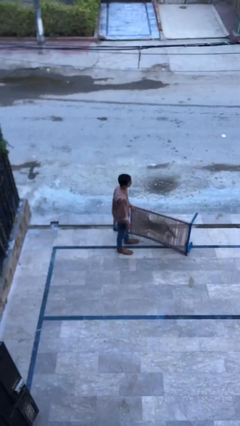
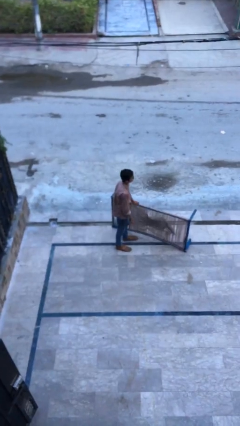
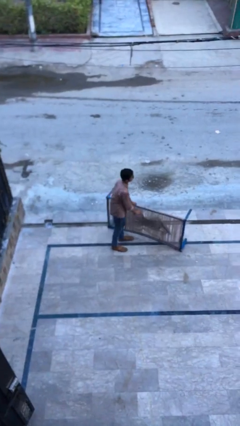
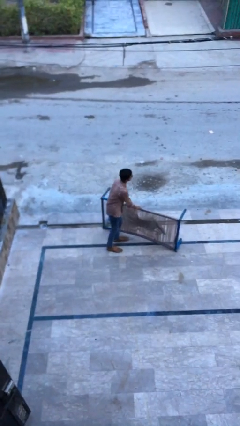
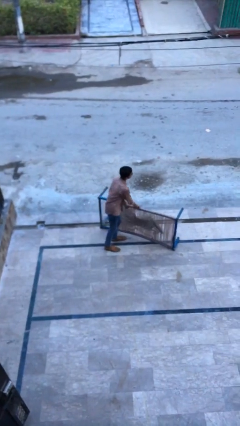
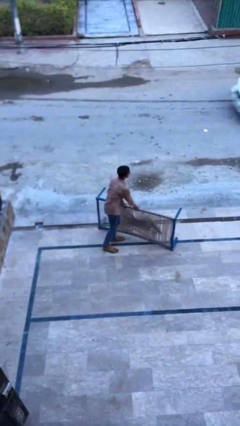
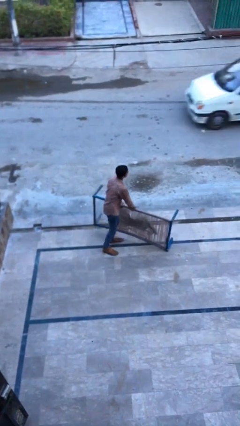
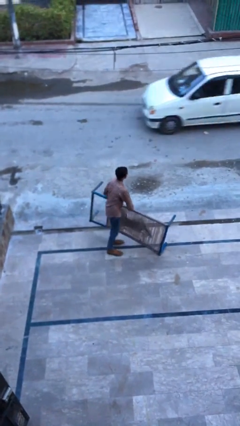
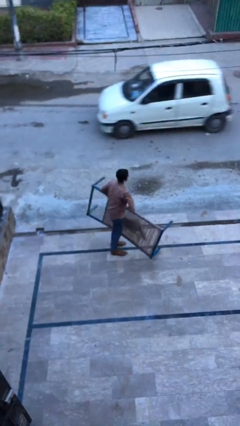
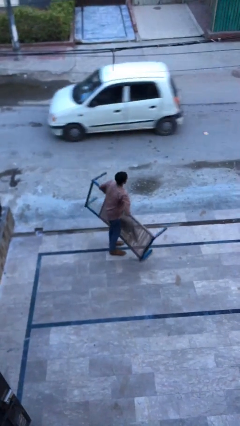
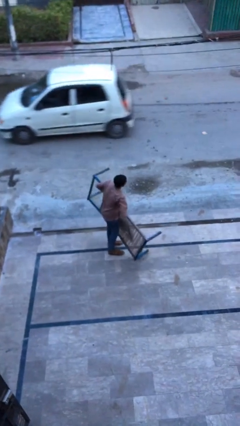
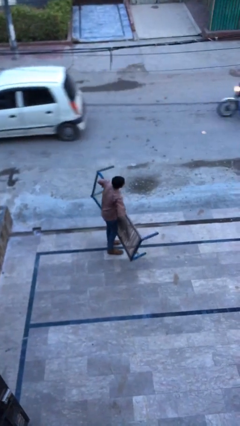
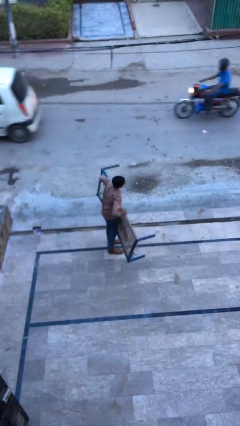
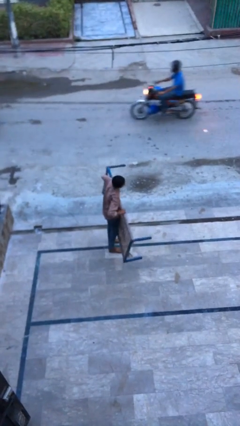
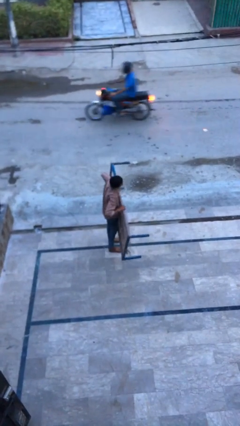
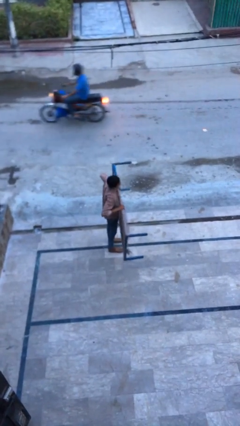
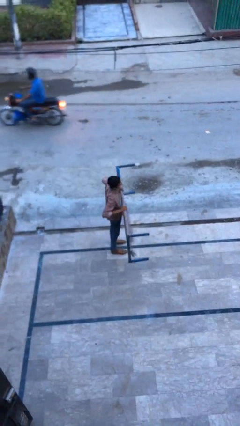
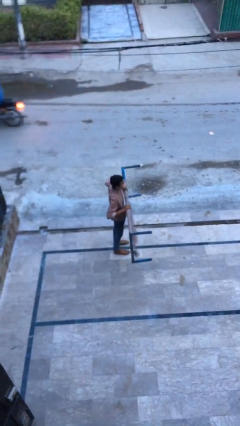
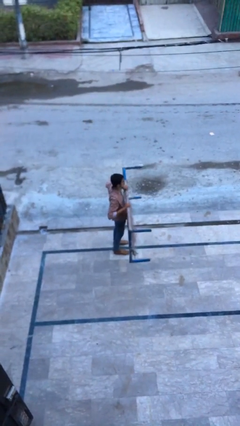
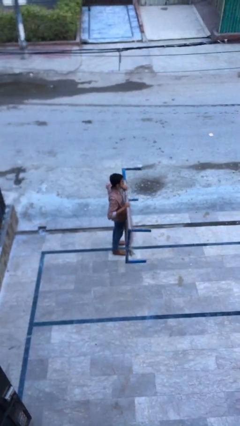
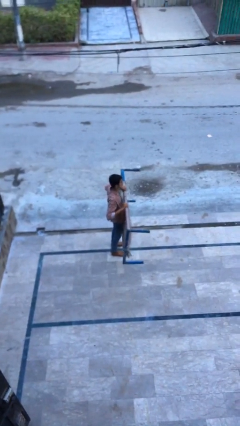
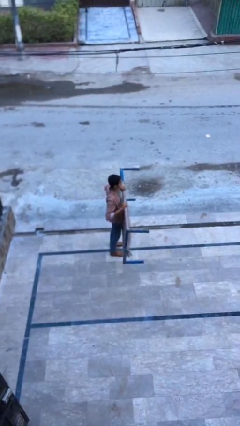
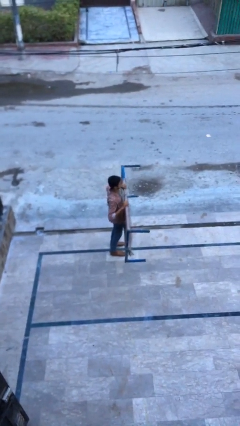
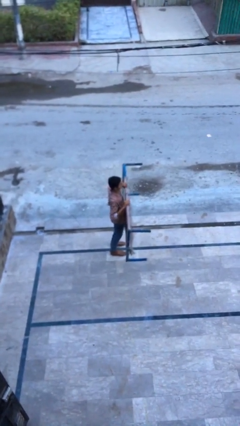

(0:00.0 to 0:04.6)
person picks up object from floor

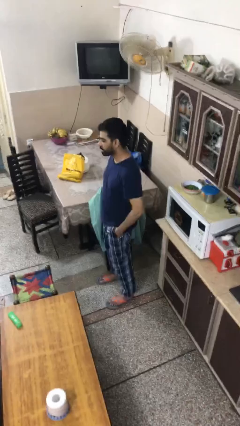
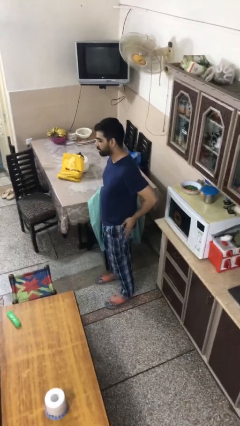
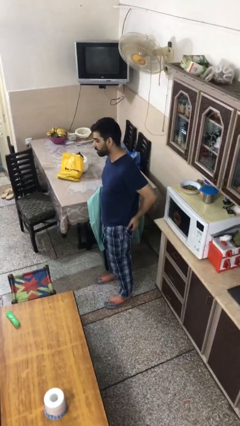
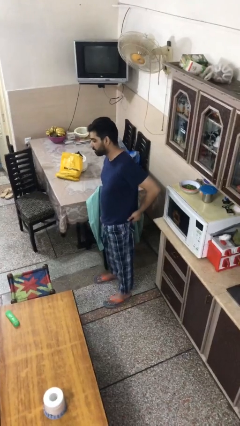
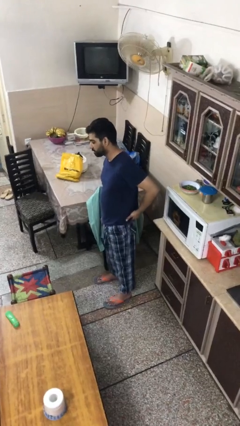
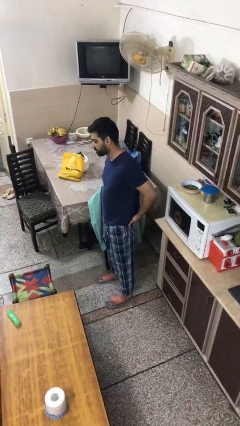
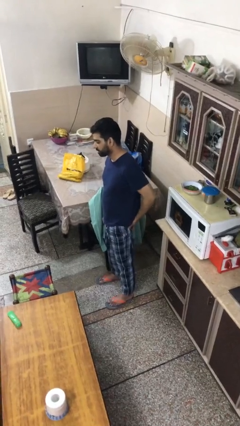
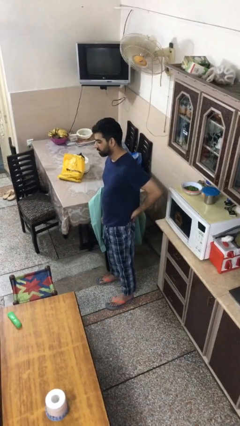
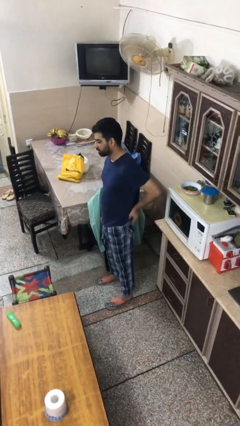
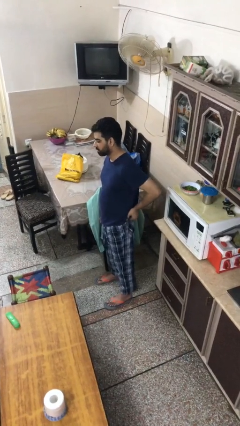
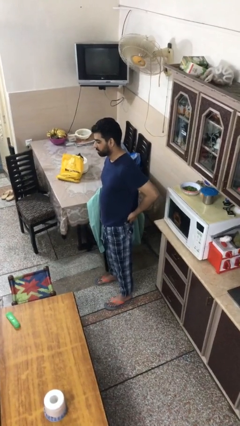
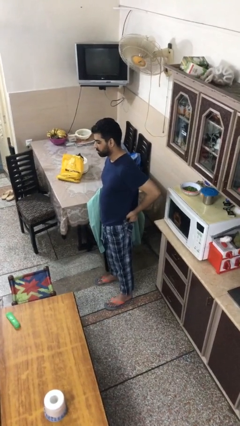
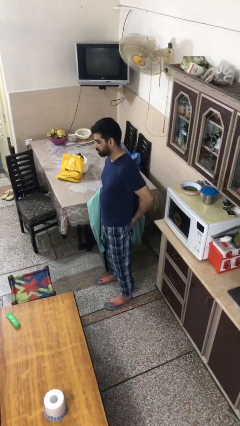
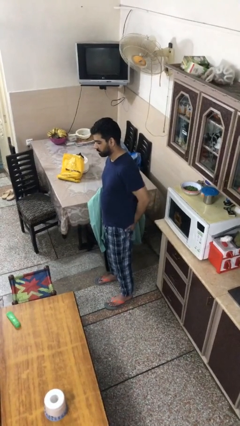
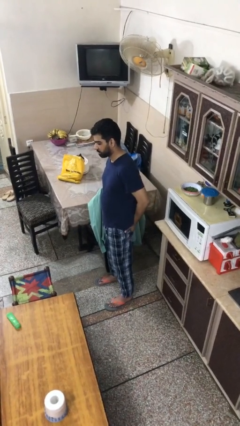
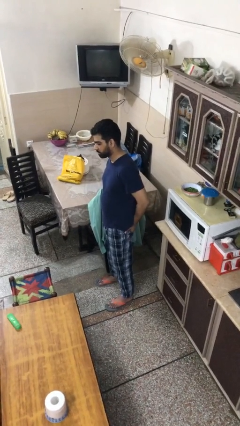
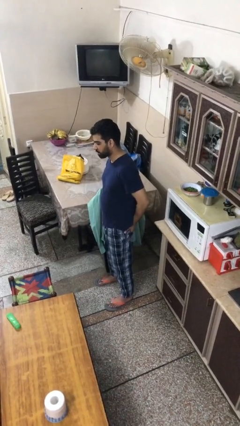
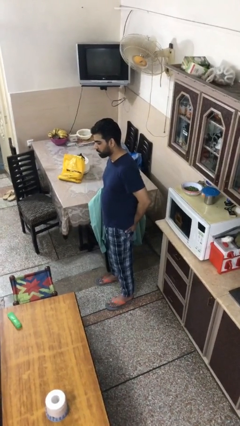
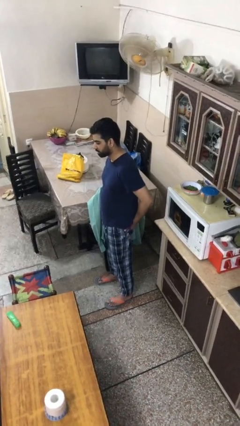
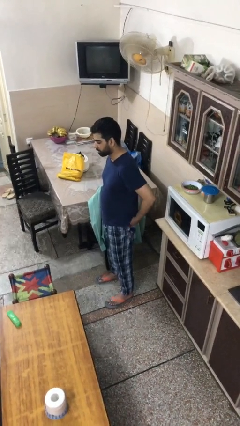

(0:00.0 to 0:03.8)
person puts hands in back pockets

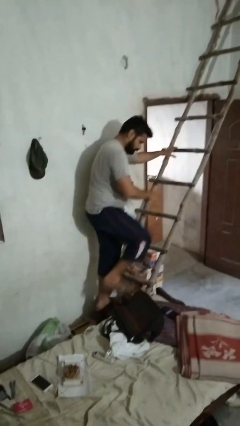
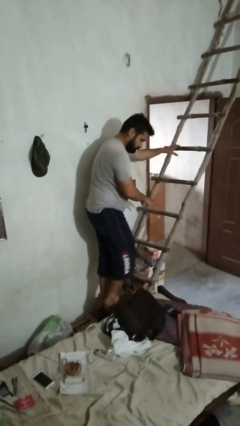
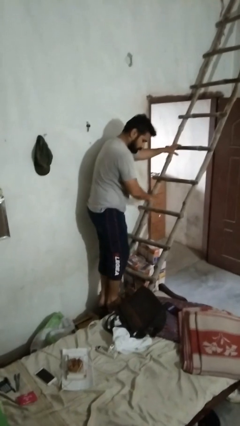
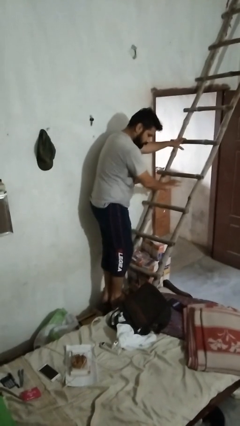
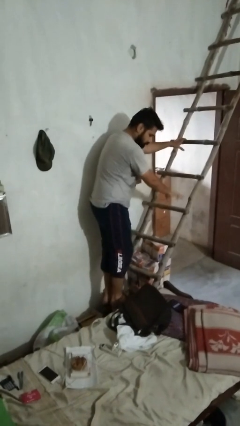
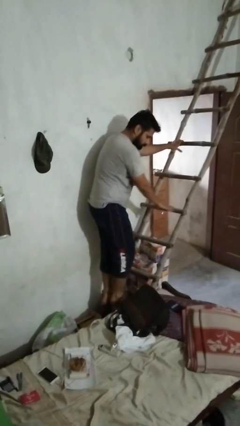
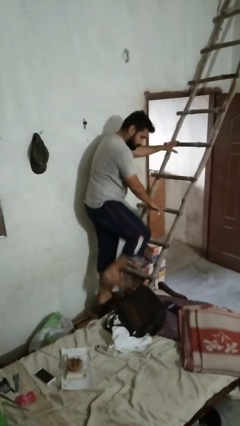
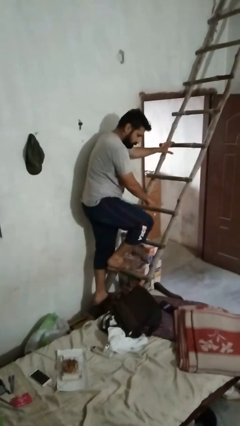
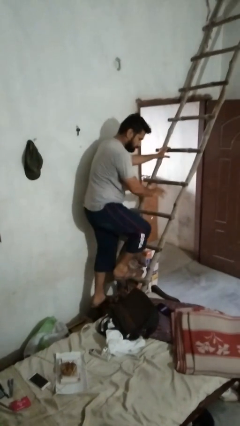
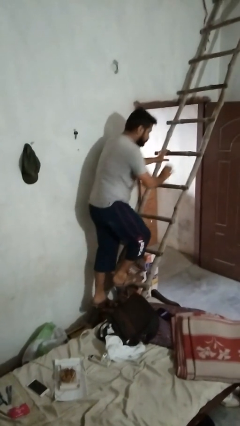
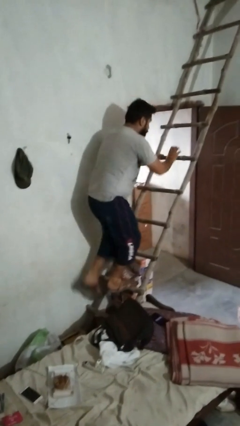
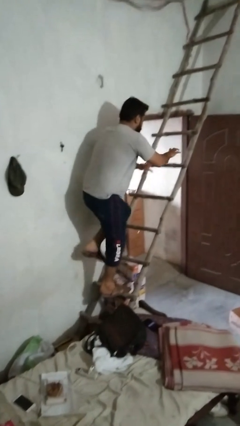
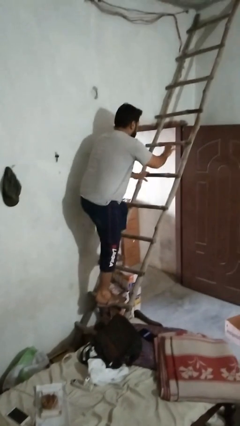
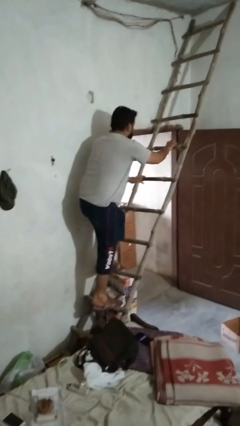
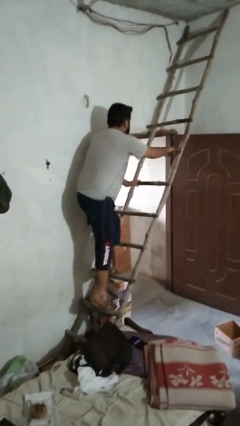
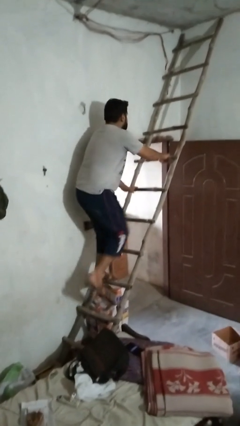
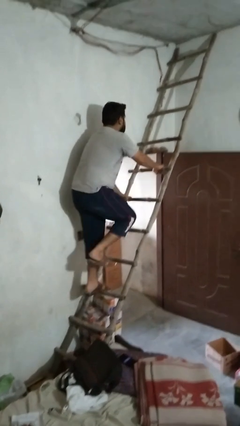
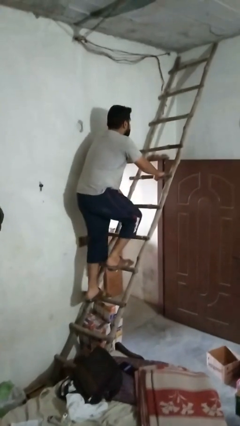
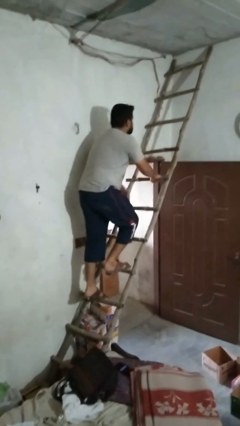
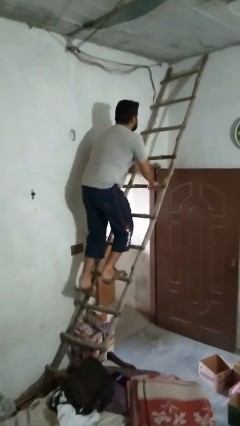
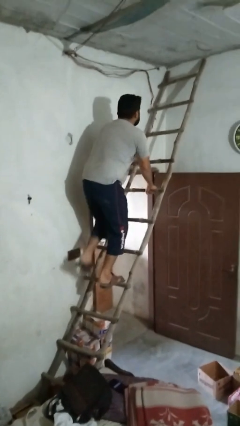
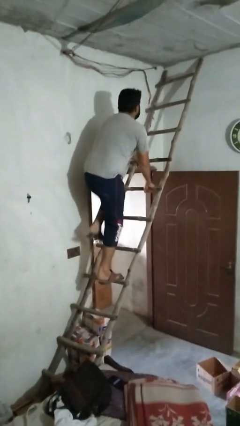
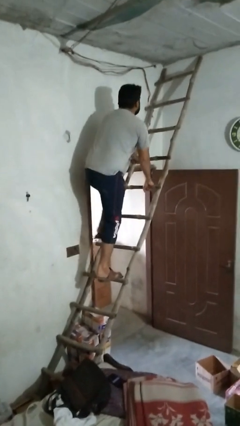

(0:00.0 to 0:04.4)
person climbs up ladder

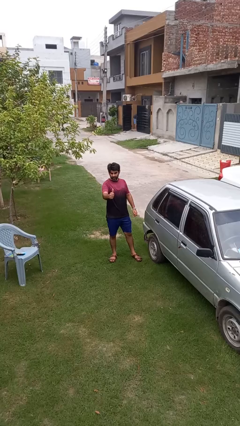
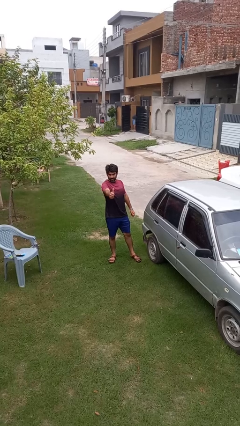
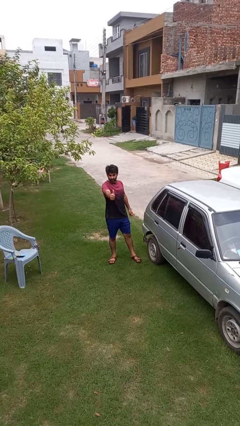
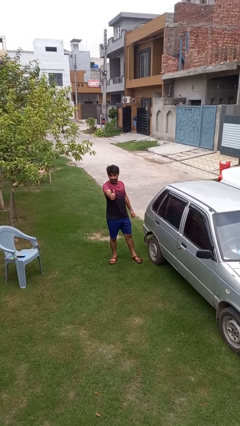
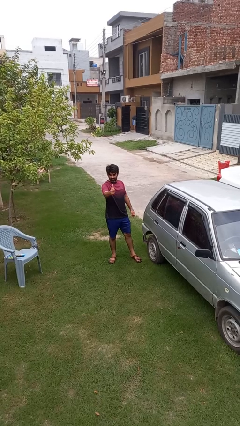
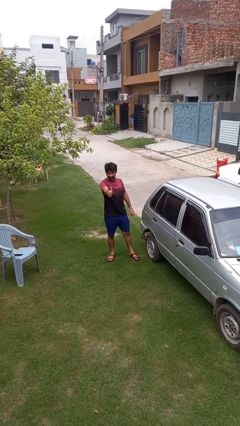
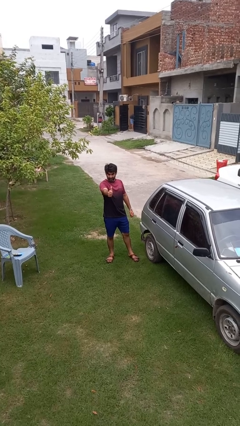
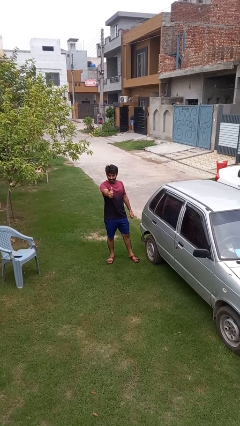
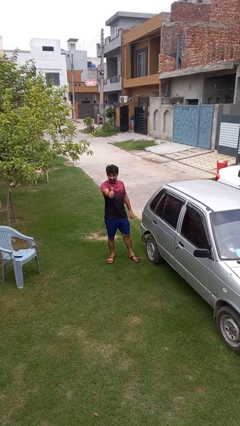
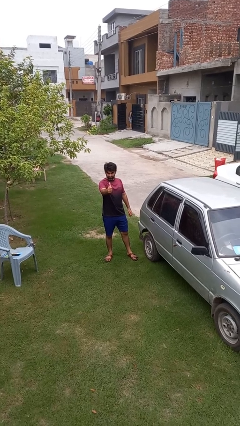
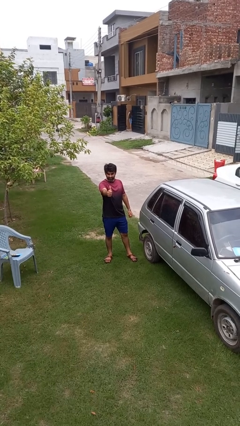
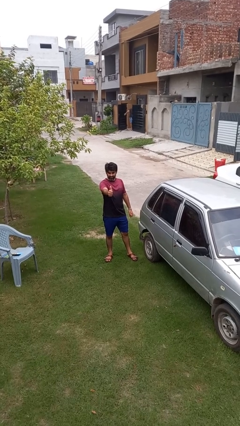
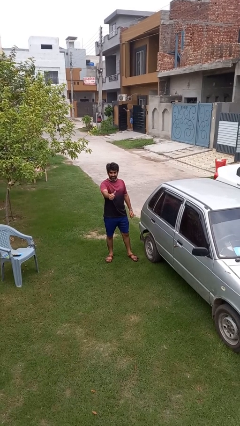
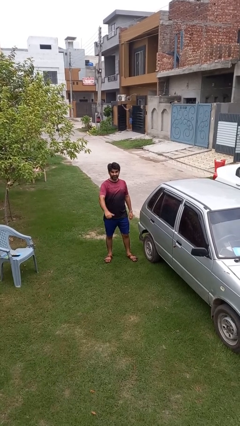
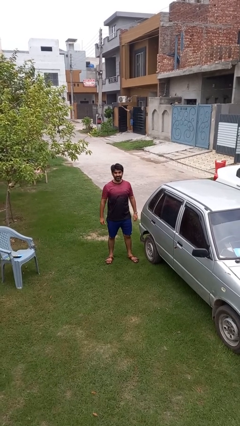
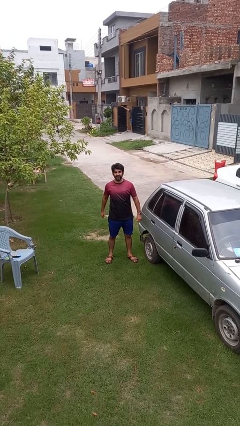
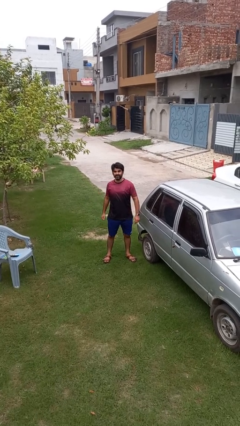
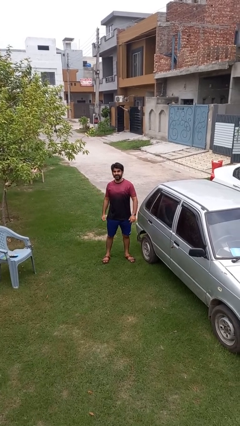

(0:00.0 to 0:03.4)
person gestures thumbs up

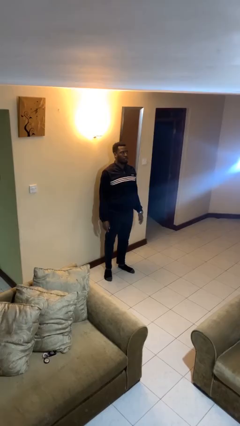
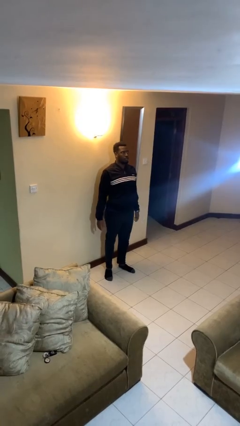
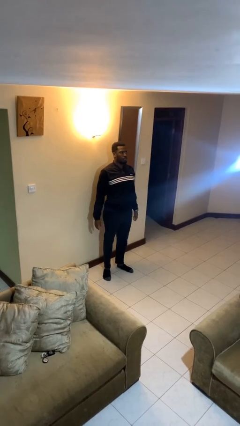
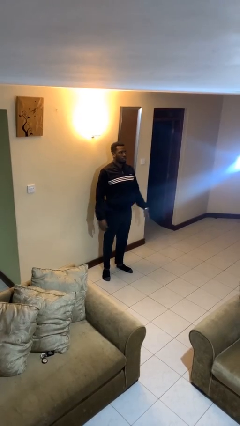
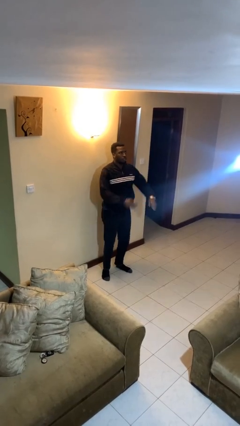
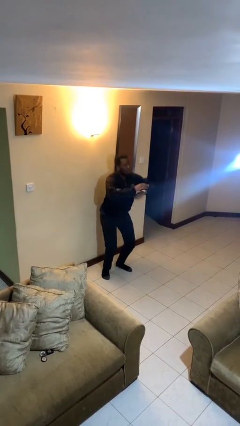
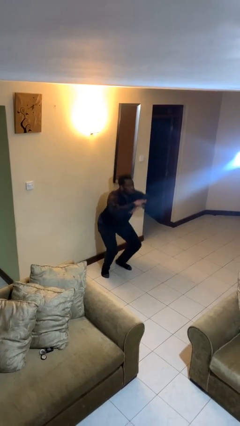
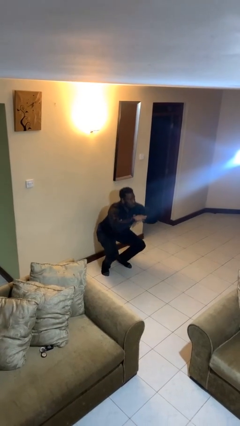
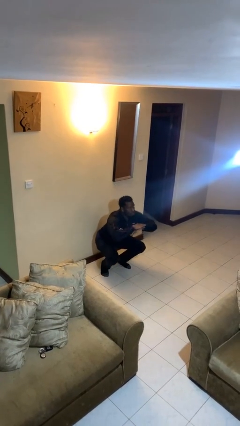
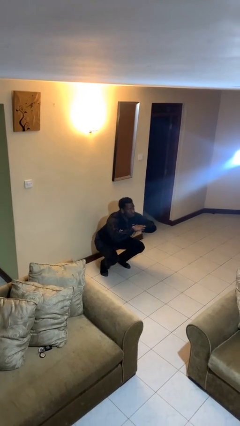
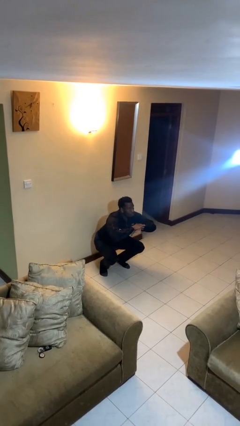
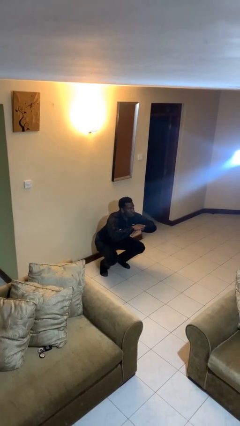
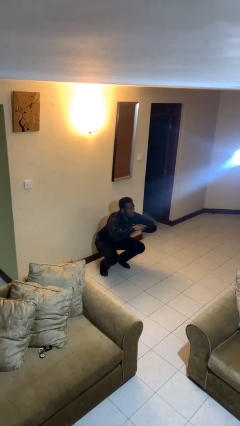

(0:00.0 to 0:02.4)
person squats
